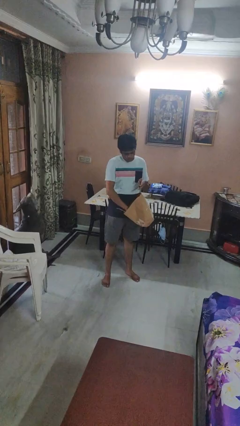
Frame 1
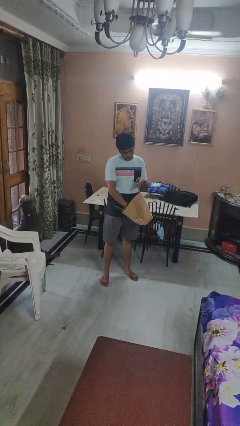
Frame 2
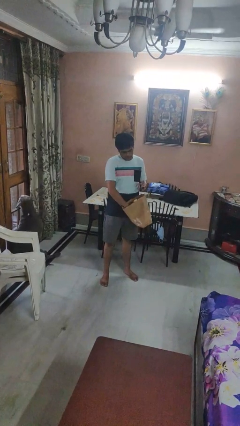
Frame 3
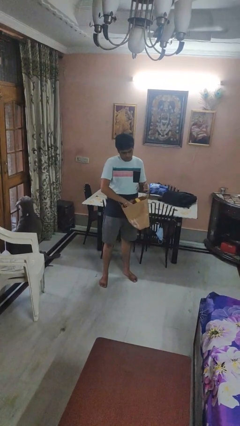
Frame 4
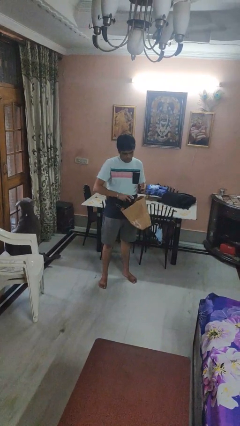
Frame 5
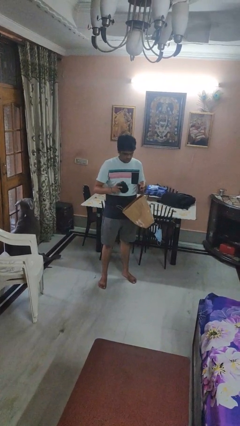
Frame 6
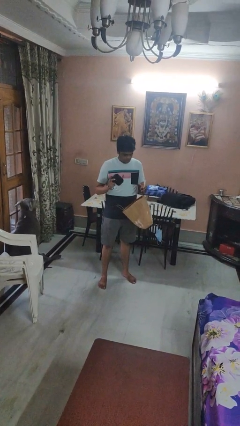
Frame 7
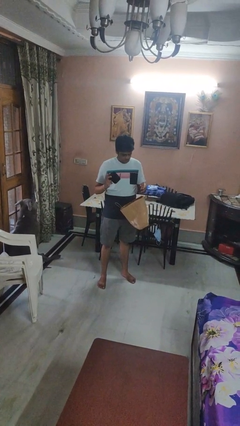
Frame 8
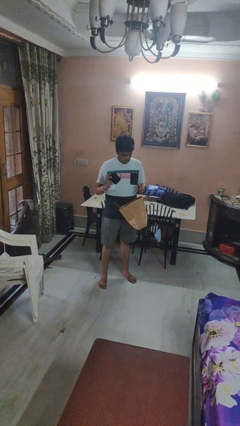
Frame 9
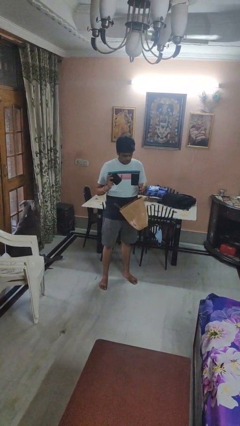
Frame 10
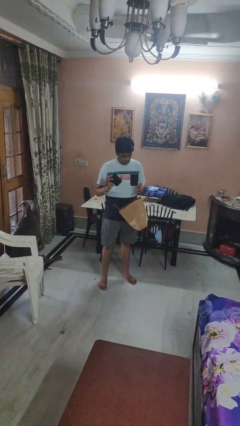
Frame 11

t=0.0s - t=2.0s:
person takes object from bag

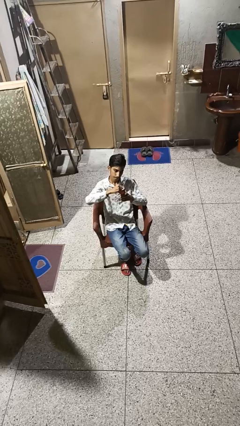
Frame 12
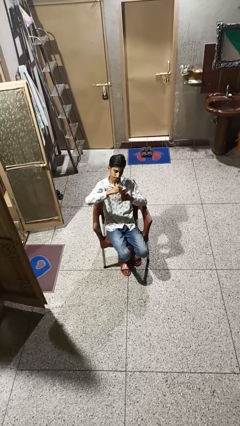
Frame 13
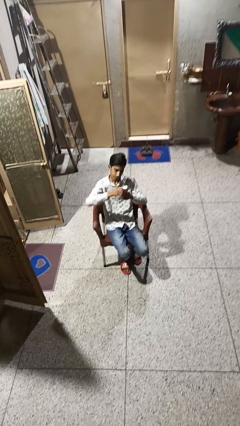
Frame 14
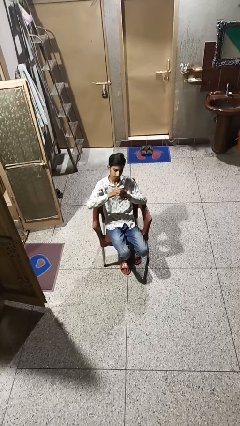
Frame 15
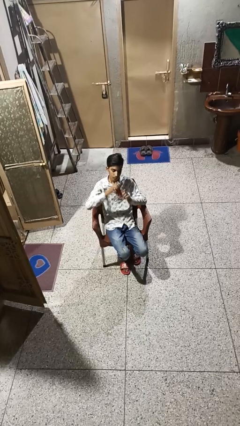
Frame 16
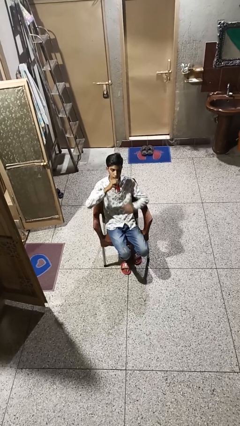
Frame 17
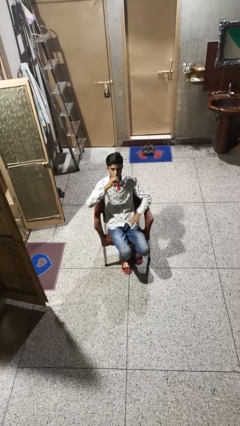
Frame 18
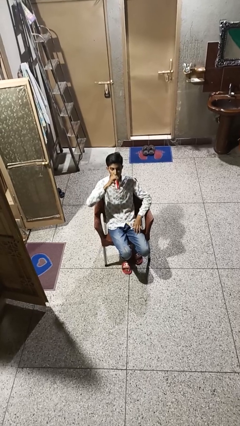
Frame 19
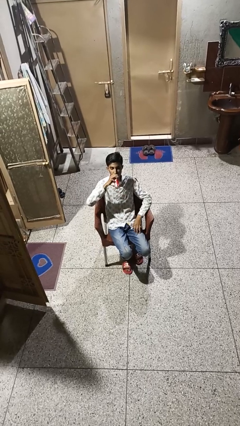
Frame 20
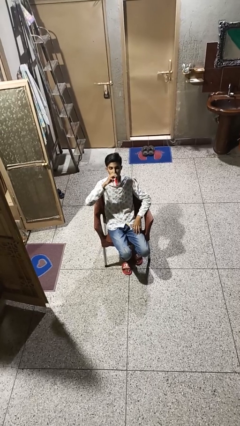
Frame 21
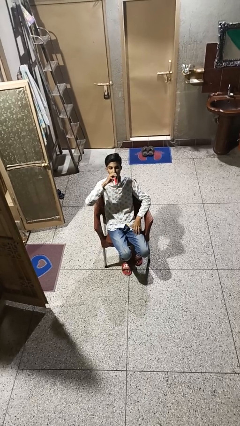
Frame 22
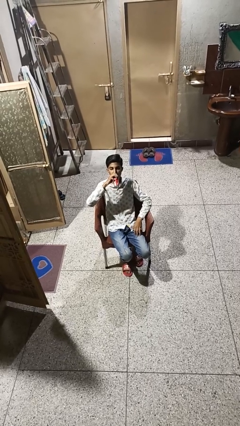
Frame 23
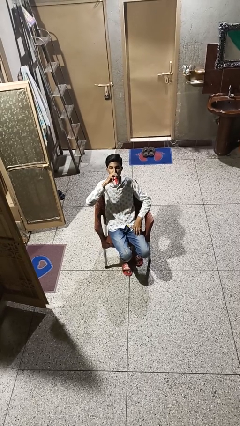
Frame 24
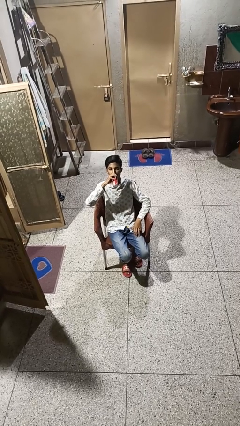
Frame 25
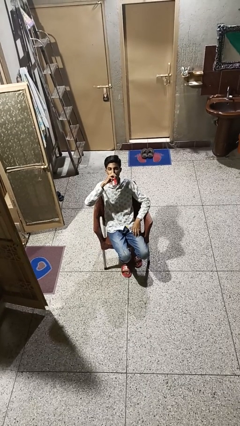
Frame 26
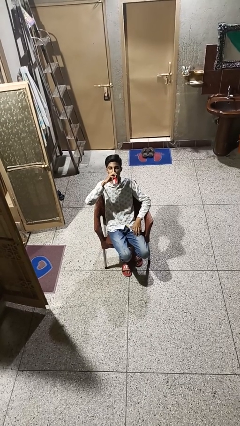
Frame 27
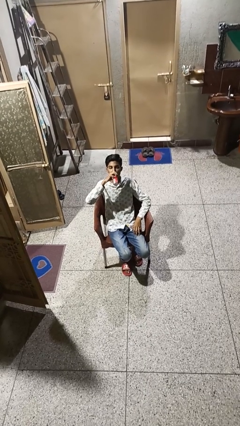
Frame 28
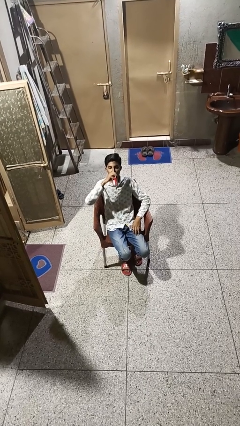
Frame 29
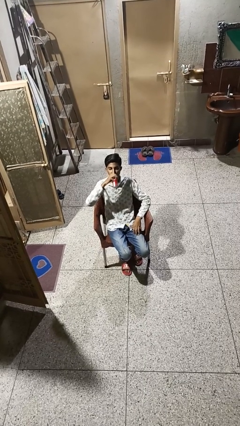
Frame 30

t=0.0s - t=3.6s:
person drinks from beverage can

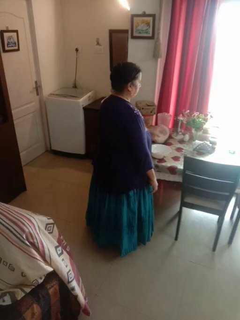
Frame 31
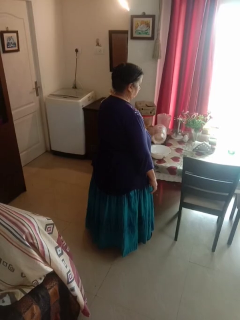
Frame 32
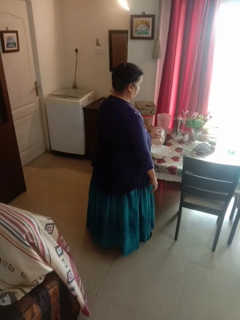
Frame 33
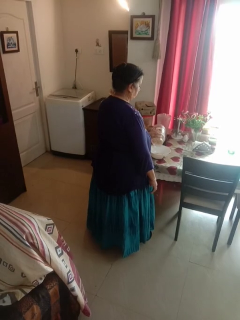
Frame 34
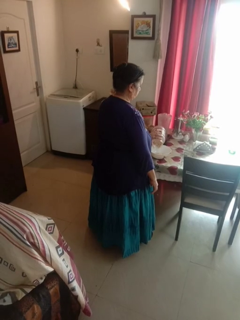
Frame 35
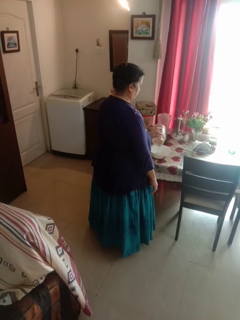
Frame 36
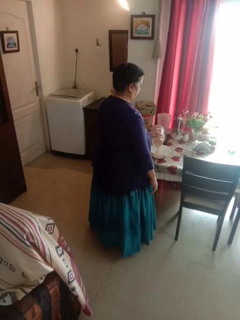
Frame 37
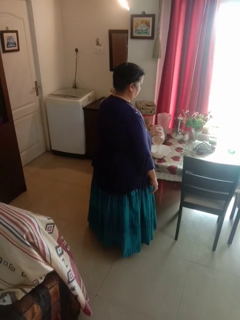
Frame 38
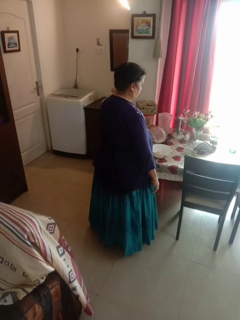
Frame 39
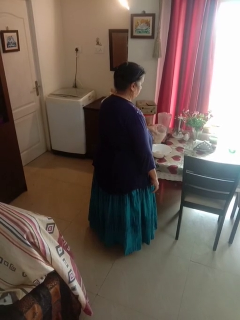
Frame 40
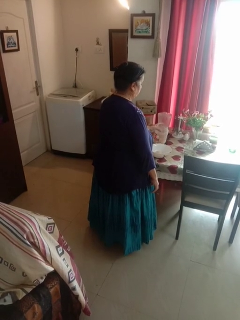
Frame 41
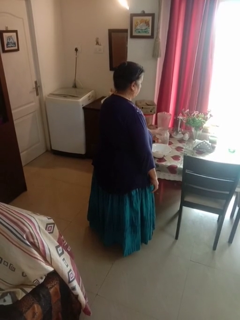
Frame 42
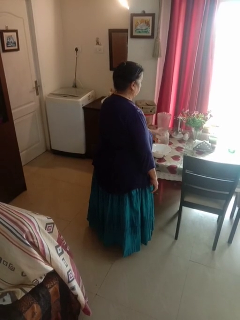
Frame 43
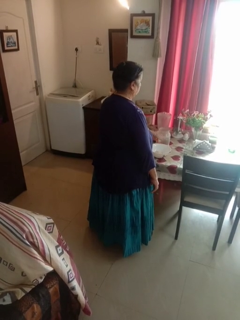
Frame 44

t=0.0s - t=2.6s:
person pours into bowl

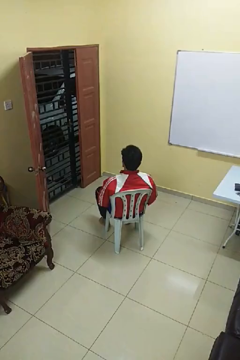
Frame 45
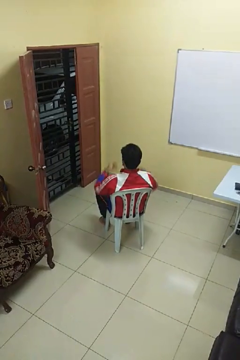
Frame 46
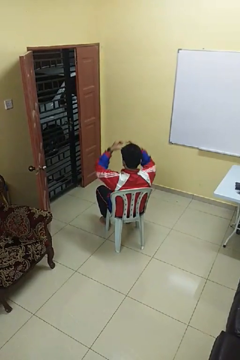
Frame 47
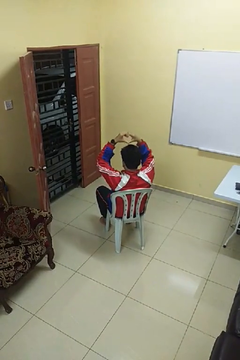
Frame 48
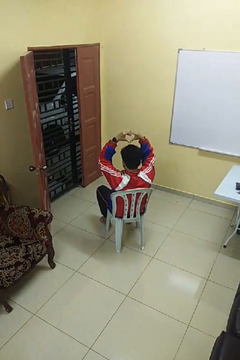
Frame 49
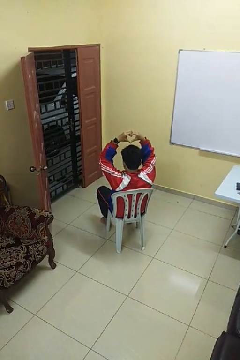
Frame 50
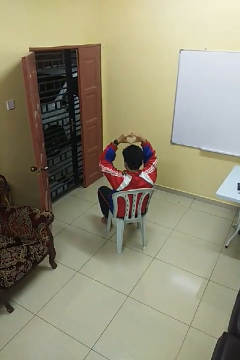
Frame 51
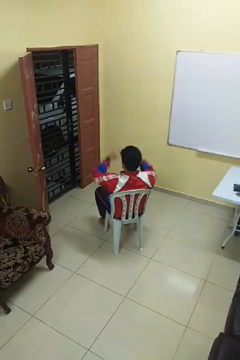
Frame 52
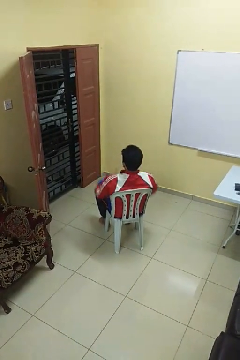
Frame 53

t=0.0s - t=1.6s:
person gestures heart

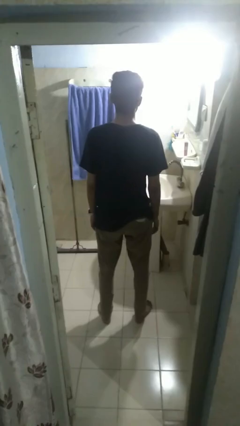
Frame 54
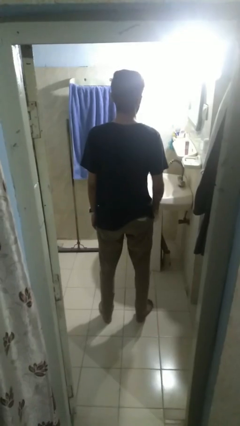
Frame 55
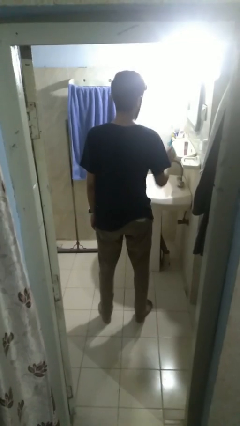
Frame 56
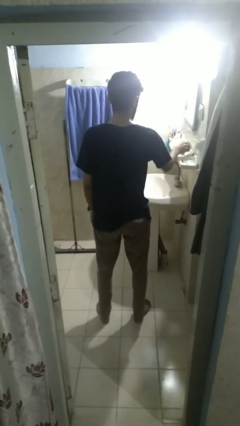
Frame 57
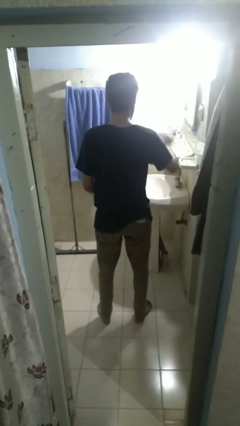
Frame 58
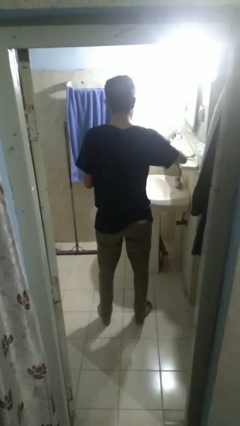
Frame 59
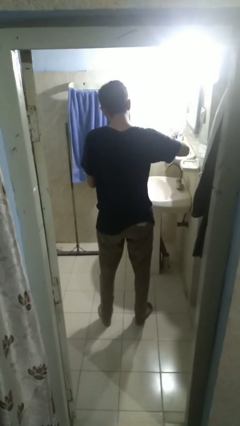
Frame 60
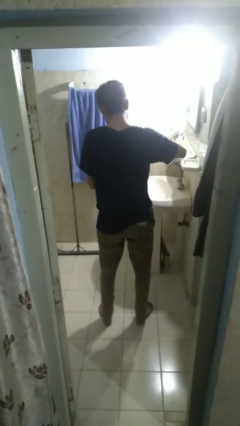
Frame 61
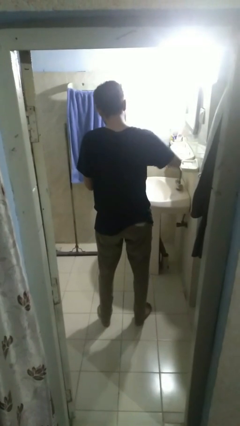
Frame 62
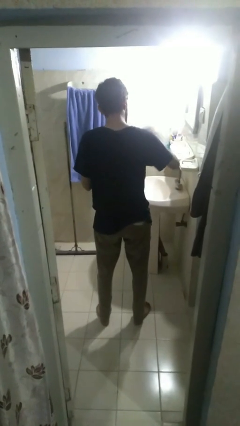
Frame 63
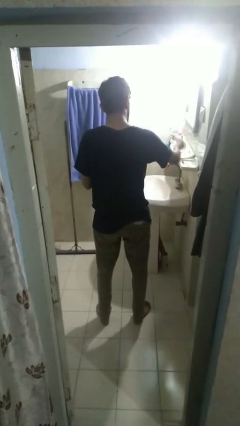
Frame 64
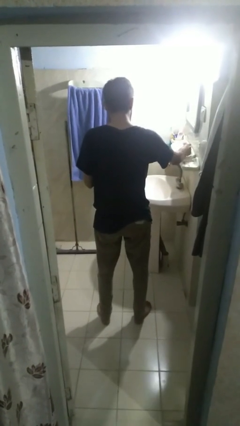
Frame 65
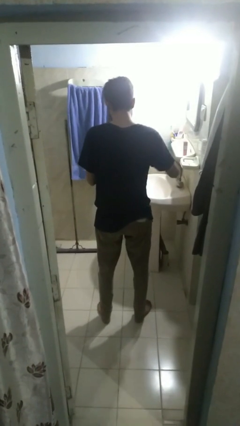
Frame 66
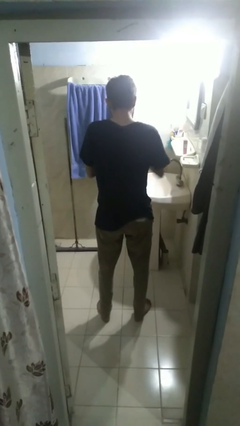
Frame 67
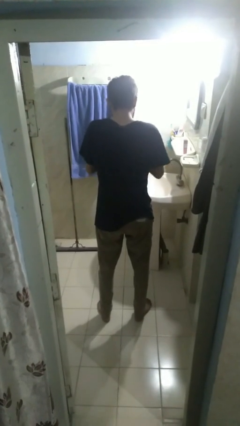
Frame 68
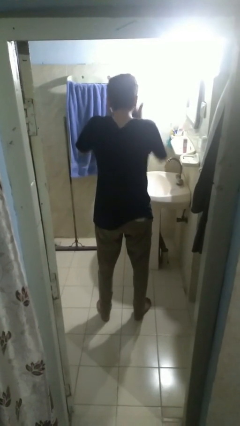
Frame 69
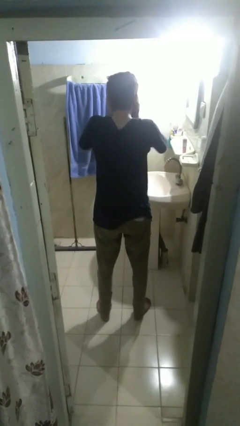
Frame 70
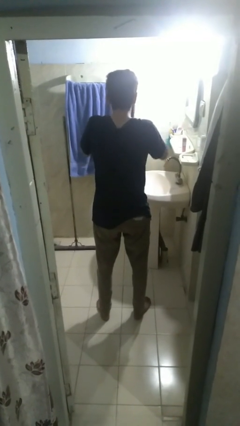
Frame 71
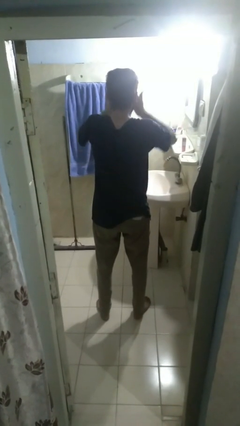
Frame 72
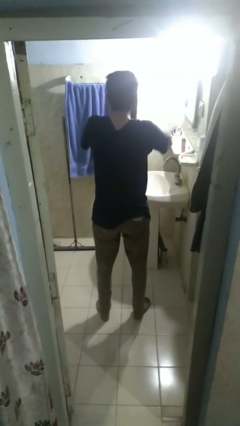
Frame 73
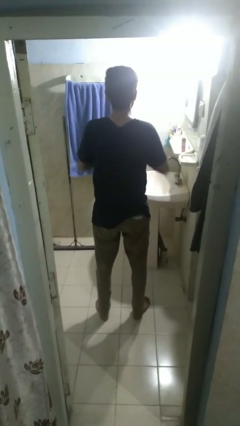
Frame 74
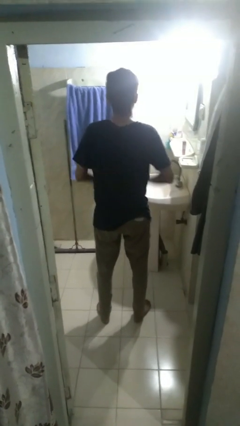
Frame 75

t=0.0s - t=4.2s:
person applies facial moisturizer

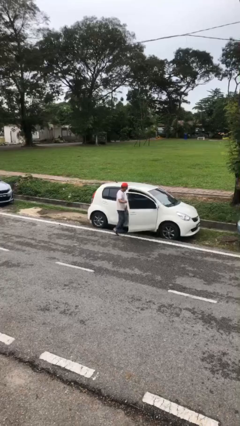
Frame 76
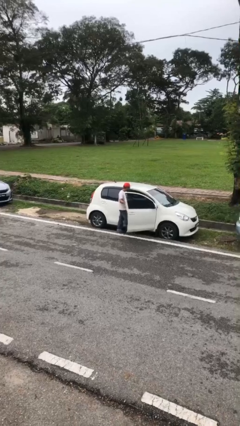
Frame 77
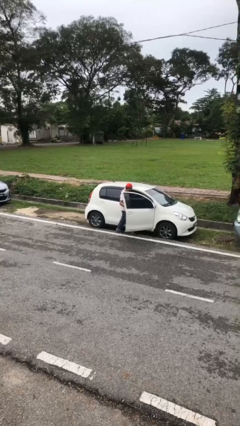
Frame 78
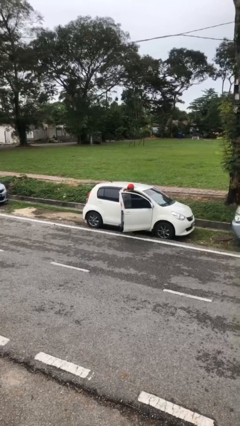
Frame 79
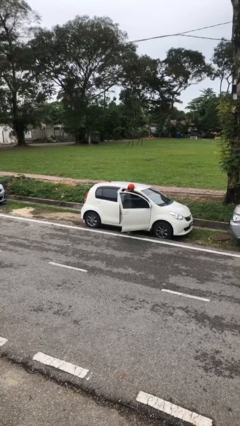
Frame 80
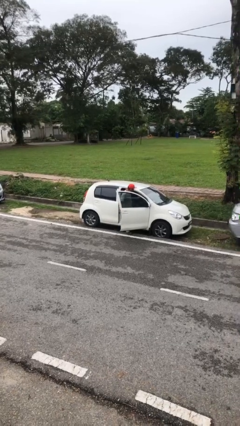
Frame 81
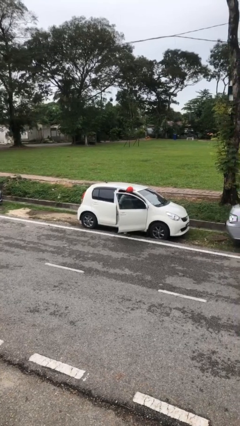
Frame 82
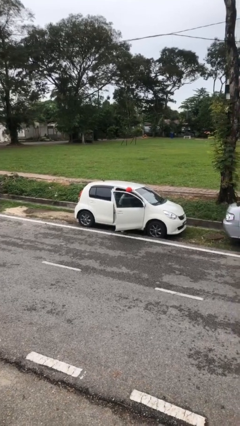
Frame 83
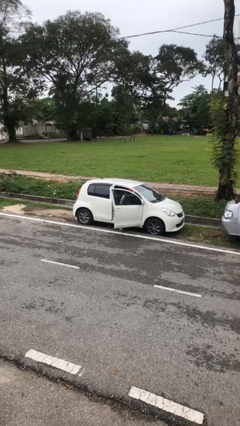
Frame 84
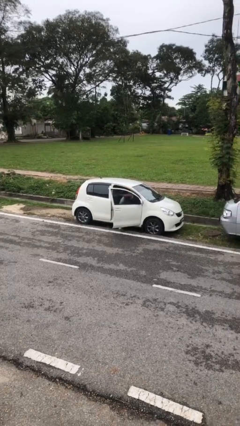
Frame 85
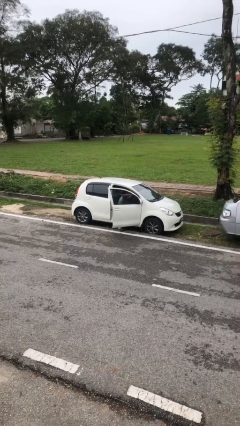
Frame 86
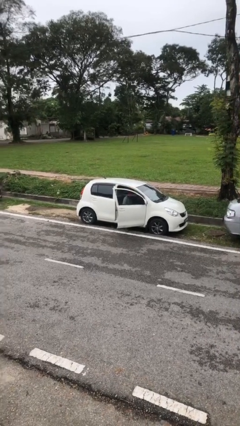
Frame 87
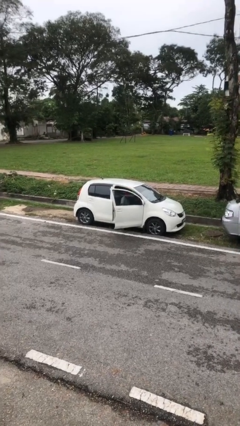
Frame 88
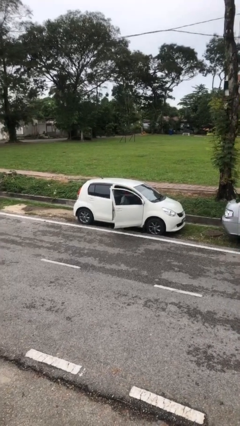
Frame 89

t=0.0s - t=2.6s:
person enters car

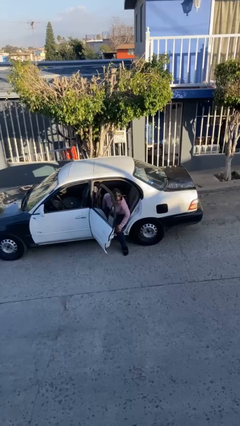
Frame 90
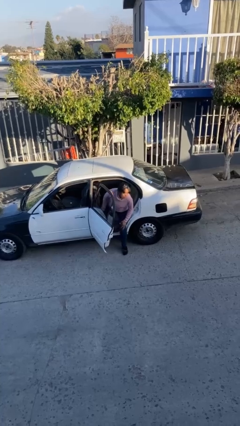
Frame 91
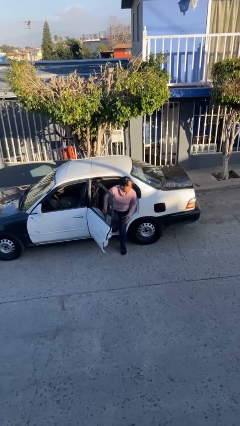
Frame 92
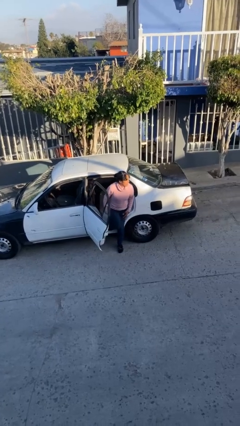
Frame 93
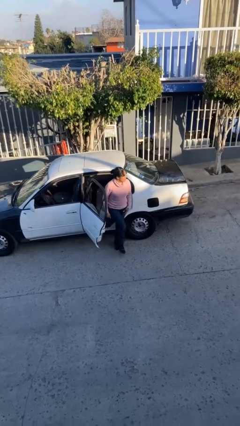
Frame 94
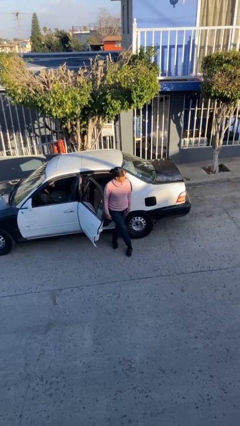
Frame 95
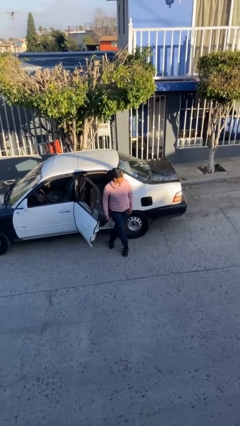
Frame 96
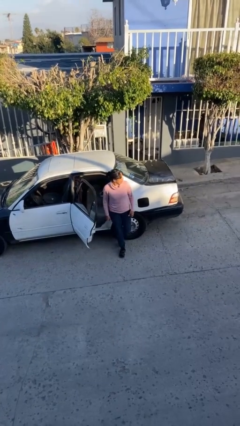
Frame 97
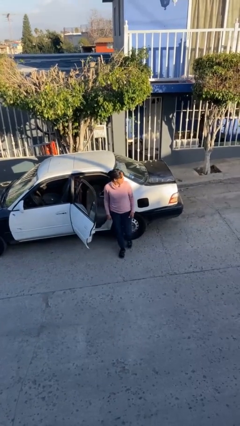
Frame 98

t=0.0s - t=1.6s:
person exits car
